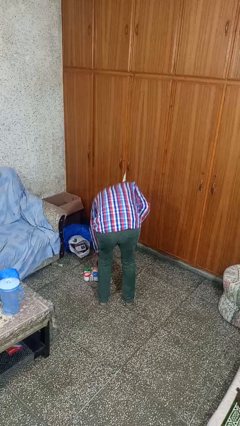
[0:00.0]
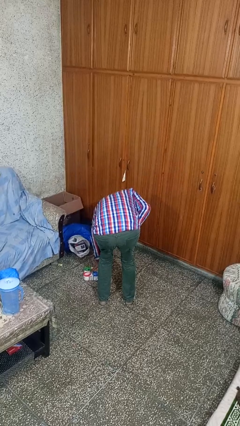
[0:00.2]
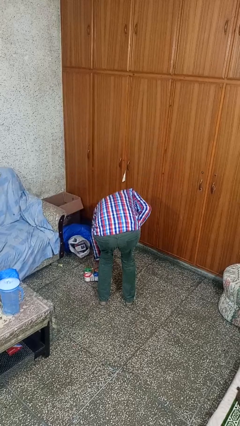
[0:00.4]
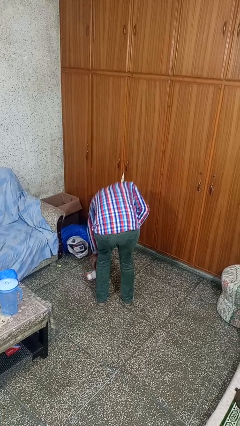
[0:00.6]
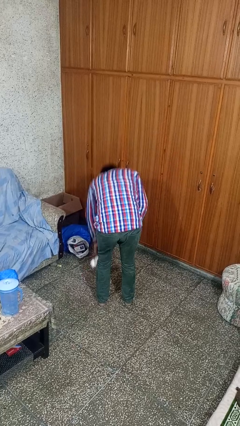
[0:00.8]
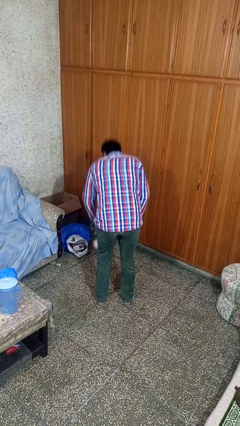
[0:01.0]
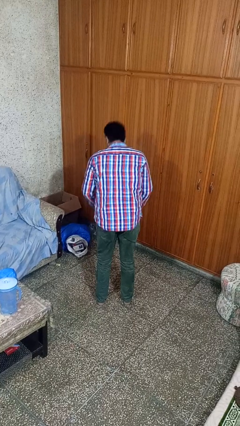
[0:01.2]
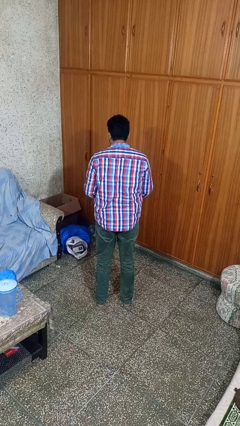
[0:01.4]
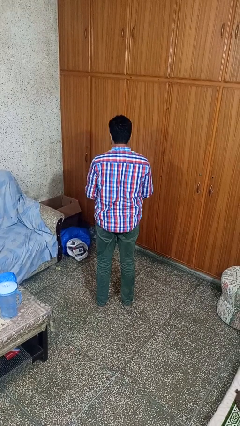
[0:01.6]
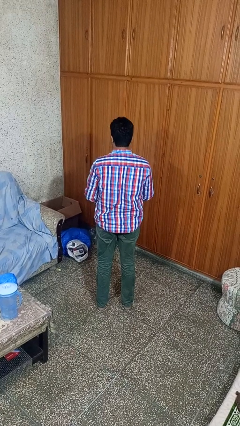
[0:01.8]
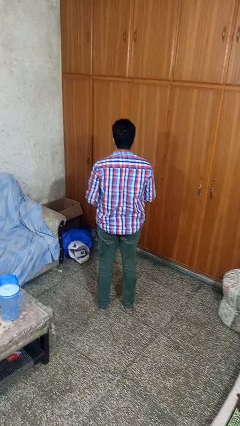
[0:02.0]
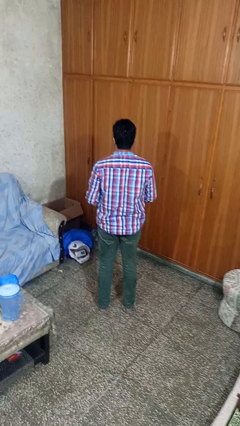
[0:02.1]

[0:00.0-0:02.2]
person picks up object from floor

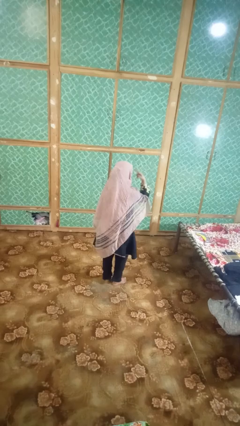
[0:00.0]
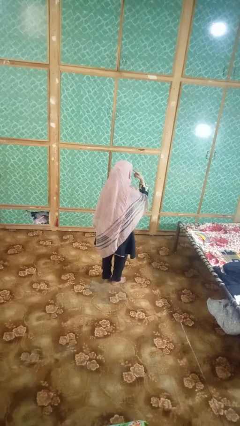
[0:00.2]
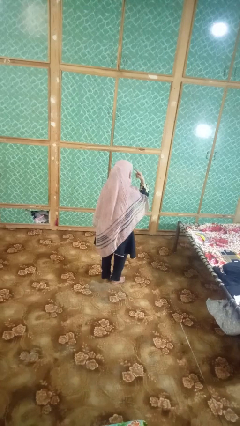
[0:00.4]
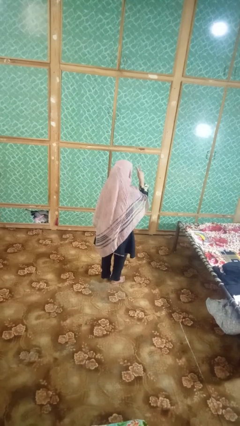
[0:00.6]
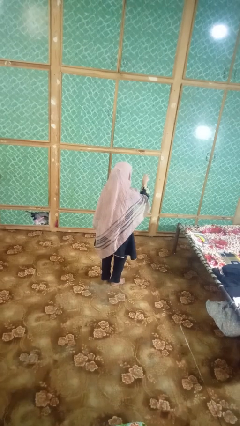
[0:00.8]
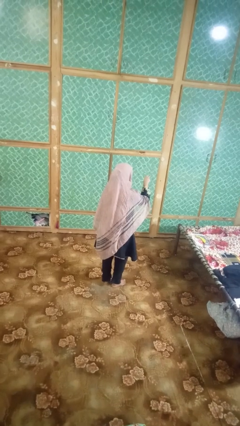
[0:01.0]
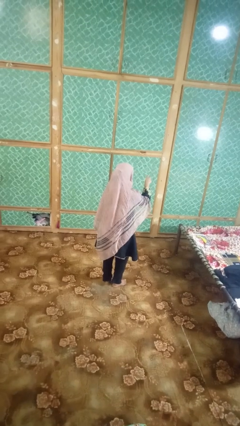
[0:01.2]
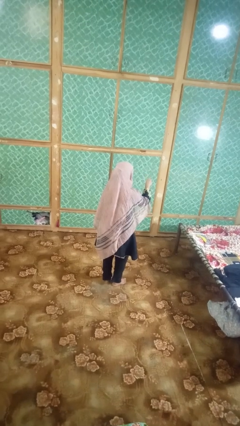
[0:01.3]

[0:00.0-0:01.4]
person gestures behind me

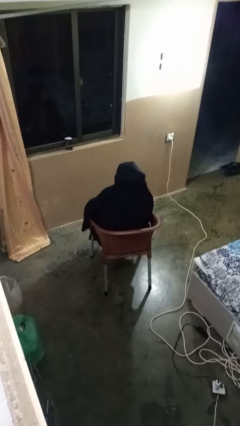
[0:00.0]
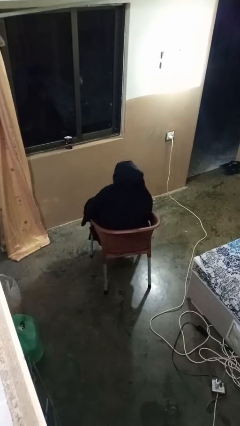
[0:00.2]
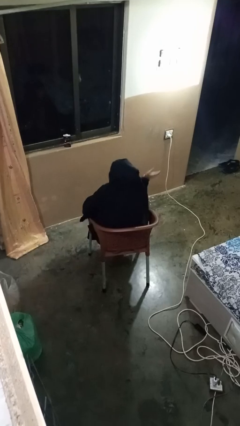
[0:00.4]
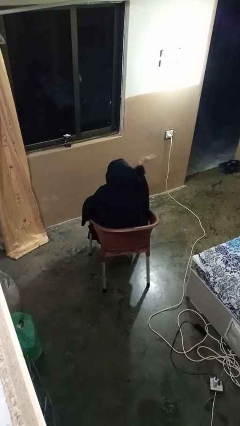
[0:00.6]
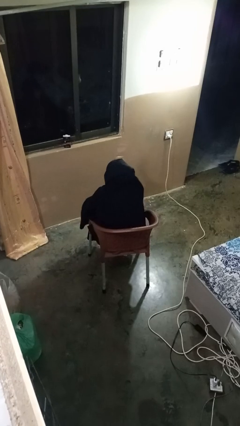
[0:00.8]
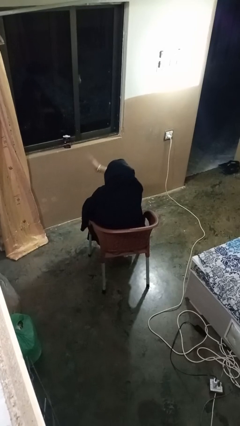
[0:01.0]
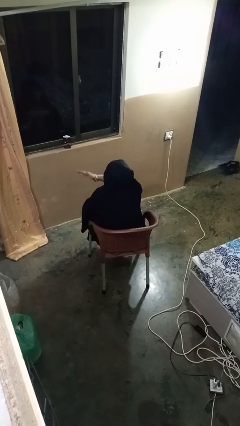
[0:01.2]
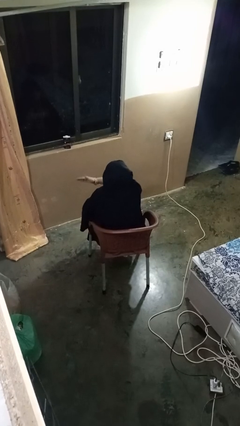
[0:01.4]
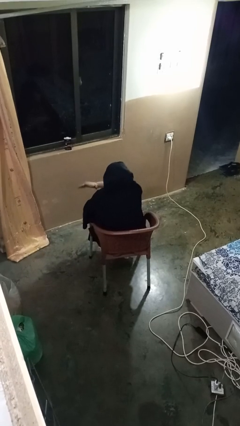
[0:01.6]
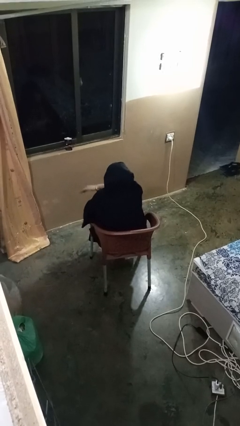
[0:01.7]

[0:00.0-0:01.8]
person gestures swipe left

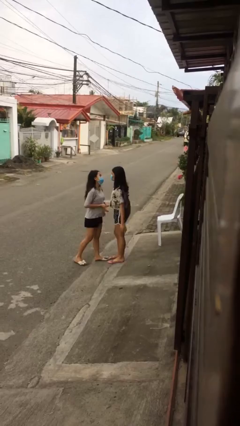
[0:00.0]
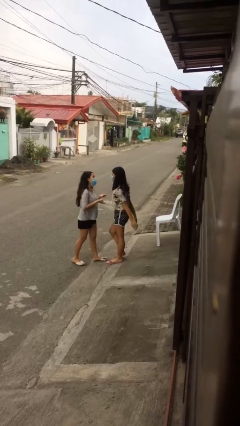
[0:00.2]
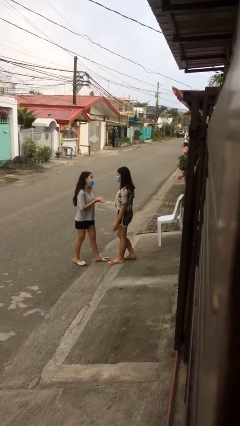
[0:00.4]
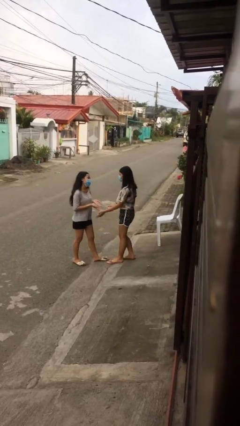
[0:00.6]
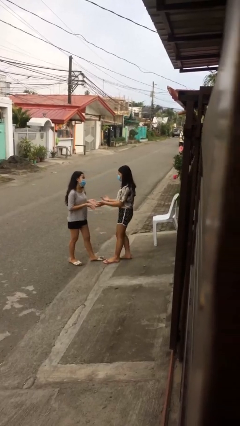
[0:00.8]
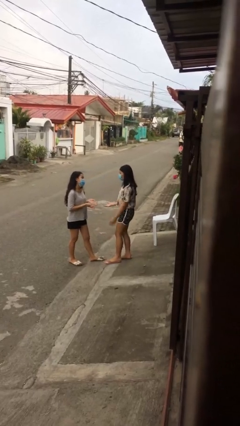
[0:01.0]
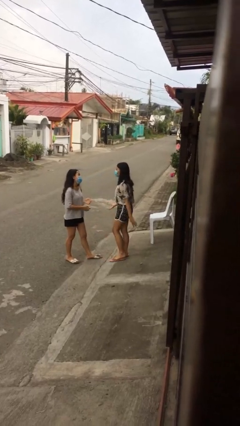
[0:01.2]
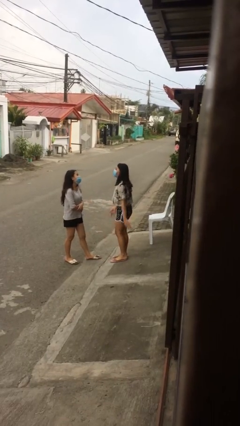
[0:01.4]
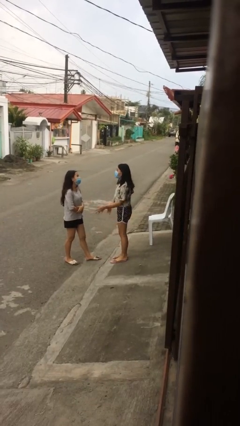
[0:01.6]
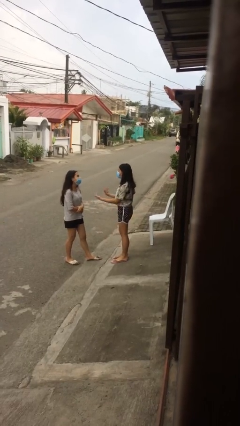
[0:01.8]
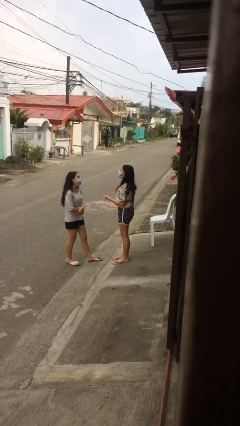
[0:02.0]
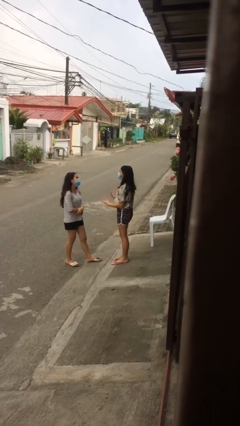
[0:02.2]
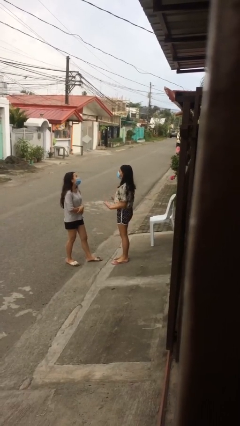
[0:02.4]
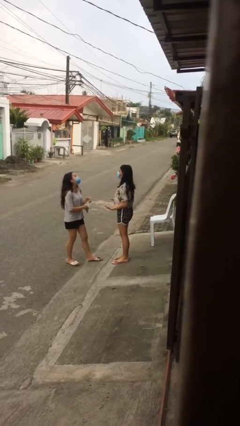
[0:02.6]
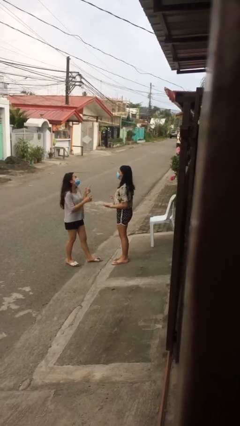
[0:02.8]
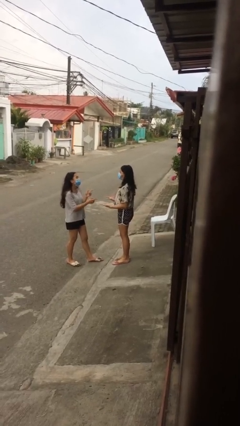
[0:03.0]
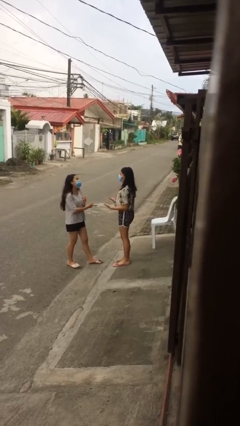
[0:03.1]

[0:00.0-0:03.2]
person talks to person

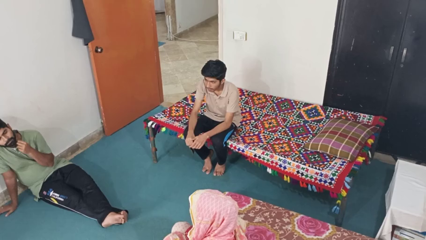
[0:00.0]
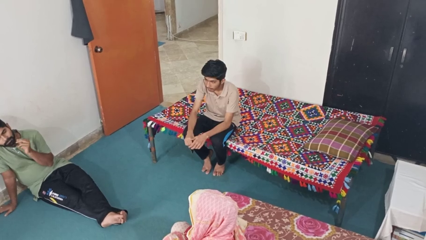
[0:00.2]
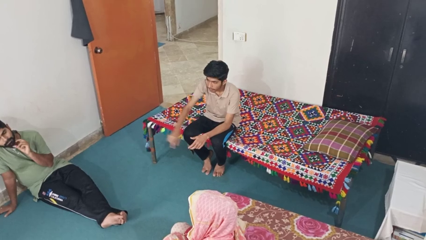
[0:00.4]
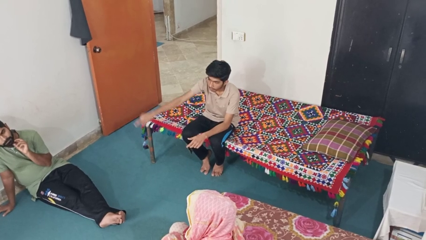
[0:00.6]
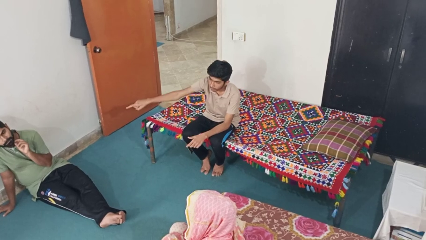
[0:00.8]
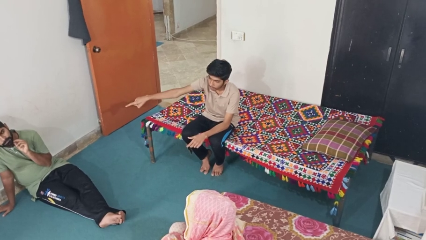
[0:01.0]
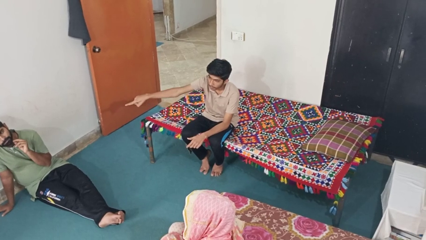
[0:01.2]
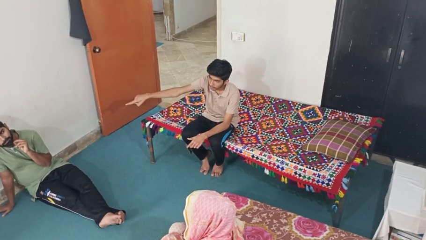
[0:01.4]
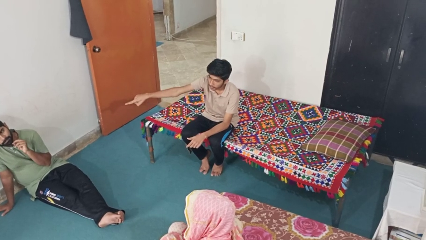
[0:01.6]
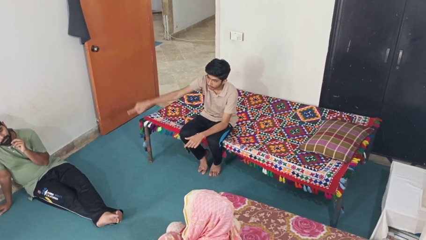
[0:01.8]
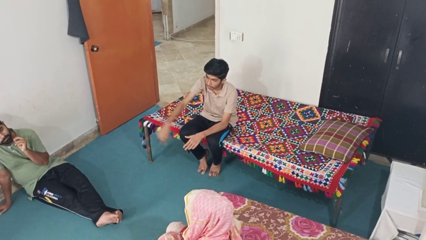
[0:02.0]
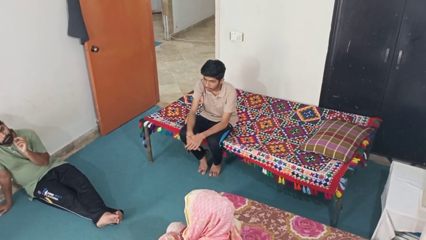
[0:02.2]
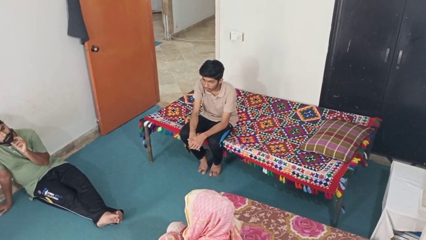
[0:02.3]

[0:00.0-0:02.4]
person points at person

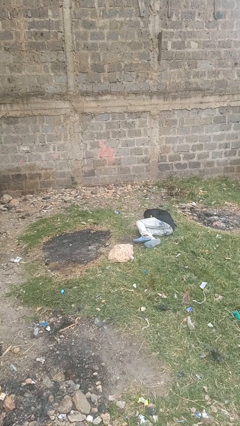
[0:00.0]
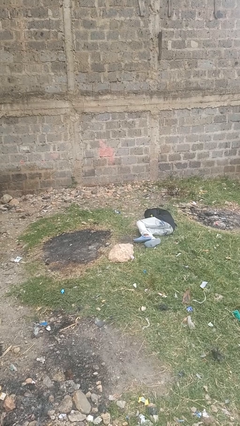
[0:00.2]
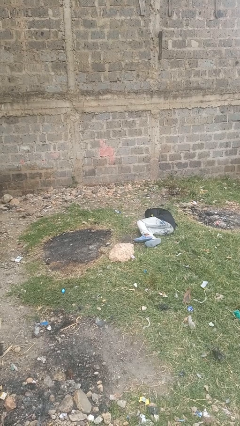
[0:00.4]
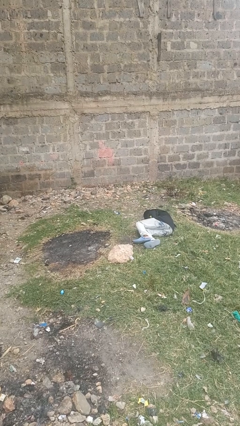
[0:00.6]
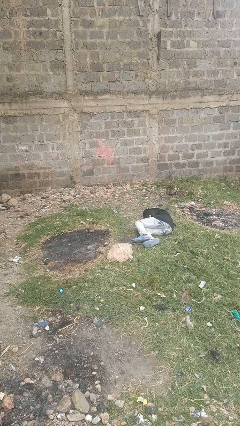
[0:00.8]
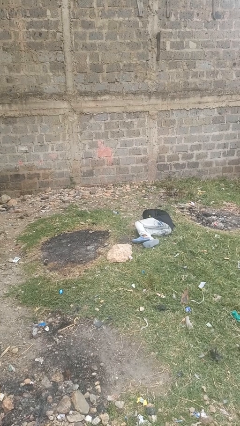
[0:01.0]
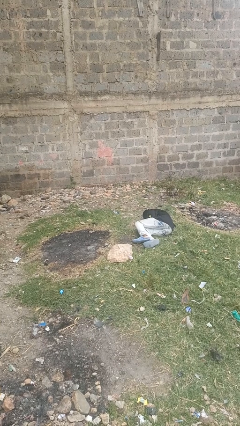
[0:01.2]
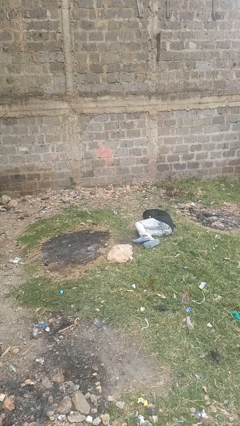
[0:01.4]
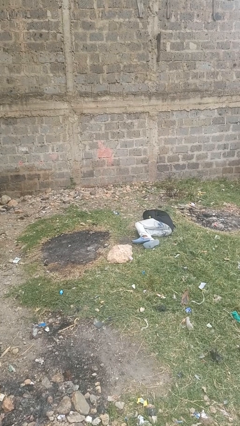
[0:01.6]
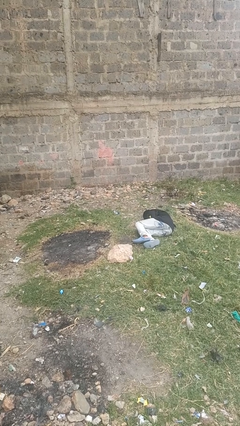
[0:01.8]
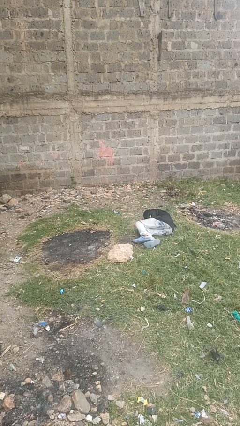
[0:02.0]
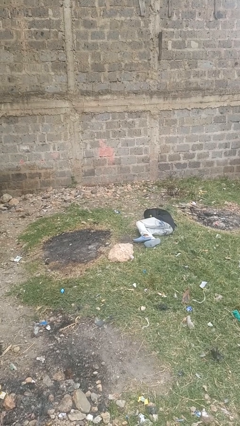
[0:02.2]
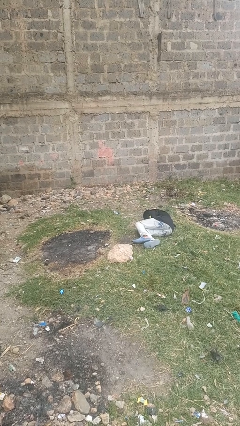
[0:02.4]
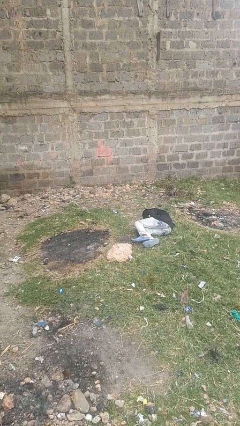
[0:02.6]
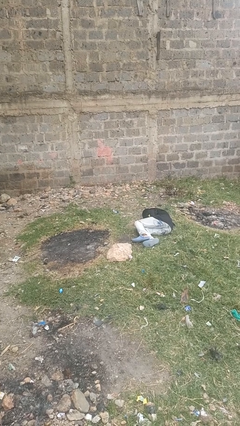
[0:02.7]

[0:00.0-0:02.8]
person lies down on floor

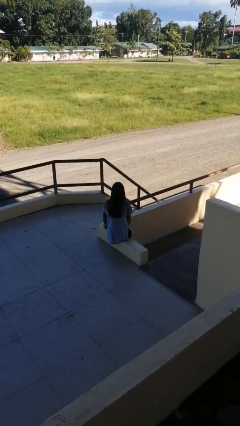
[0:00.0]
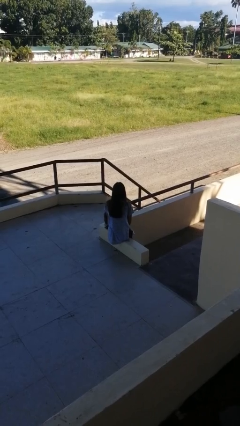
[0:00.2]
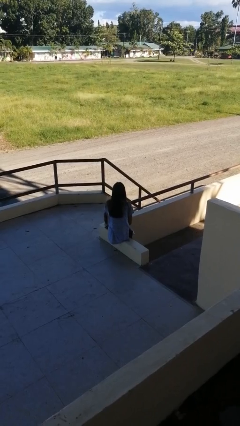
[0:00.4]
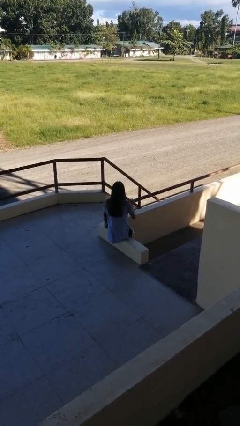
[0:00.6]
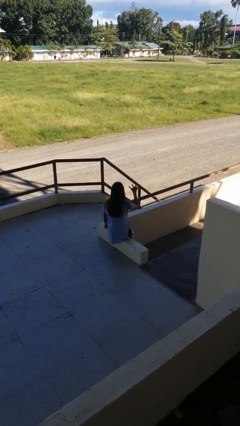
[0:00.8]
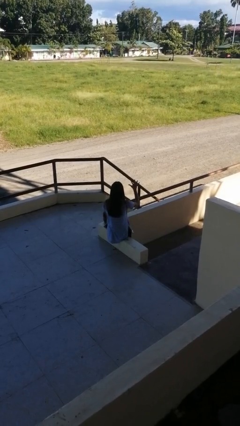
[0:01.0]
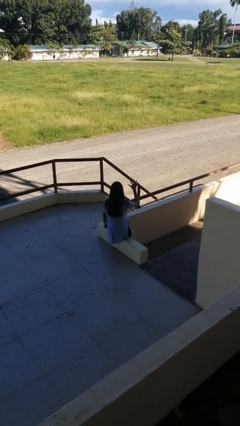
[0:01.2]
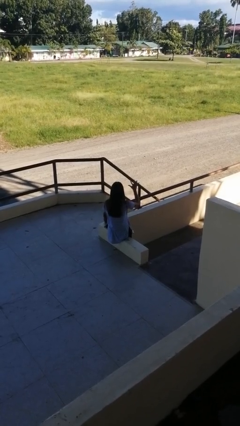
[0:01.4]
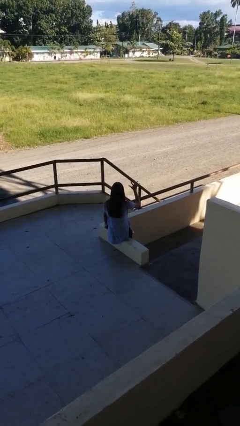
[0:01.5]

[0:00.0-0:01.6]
person gestures number five

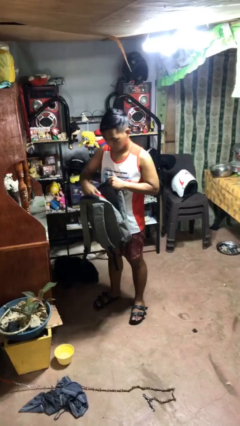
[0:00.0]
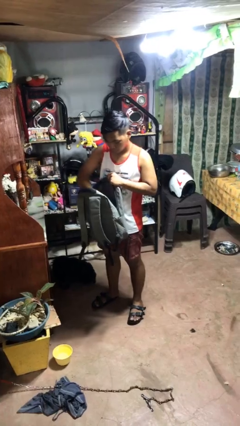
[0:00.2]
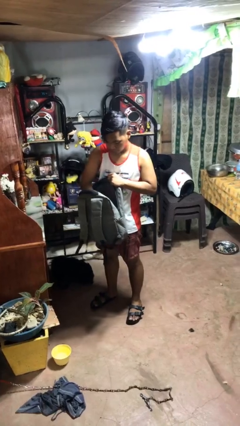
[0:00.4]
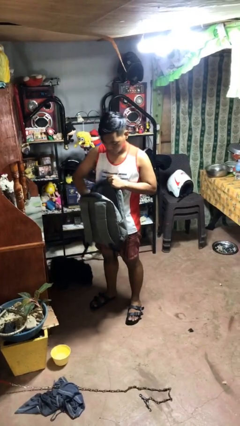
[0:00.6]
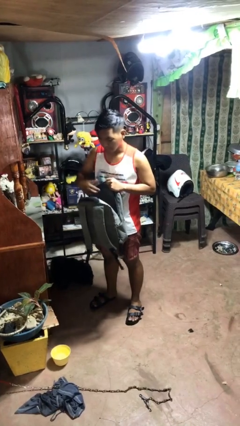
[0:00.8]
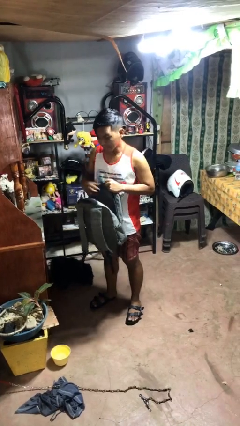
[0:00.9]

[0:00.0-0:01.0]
person puts object into bag

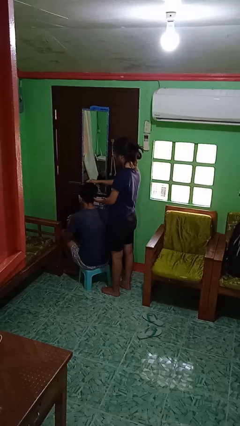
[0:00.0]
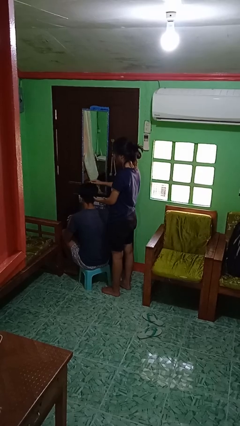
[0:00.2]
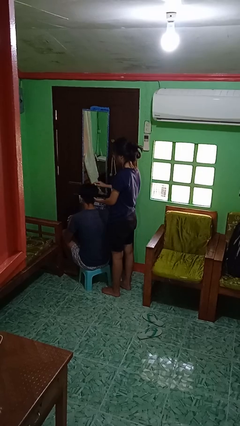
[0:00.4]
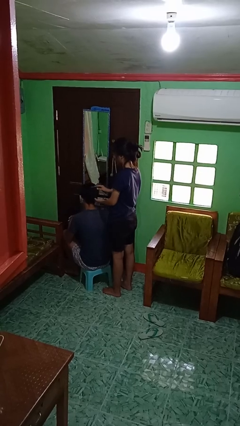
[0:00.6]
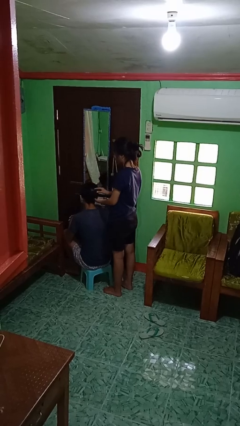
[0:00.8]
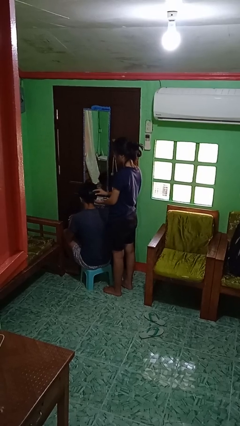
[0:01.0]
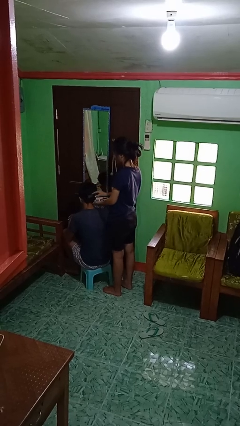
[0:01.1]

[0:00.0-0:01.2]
person brushes hair of person
